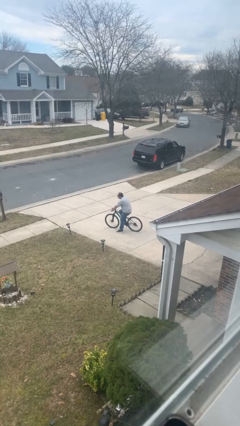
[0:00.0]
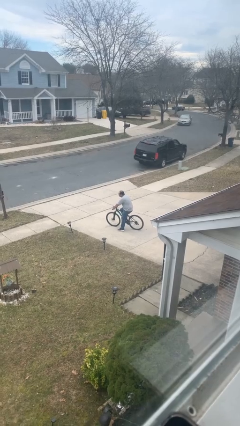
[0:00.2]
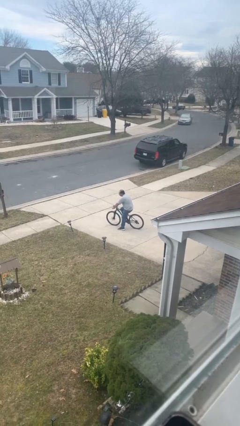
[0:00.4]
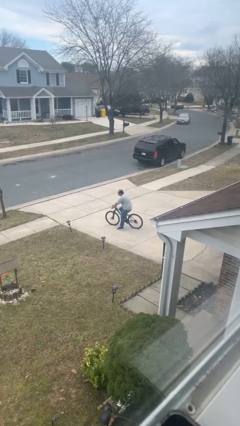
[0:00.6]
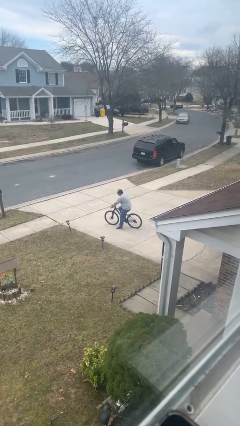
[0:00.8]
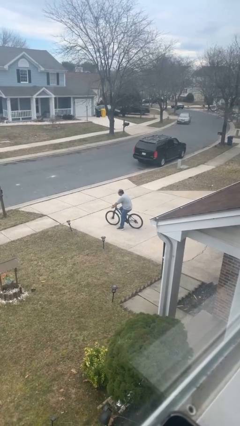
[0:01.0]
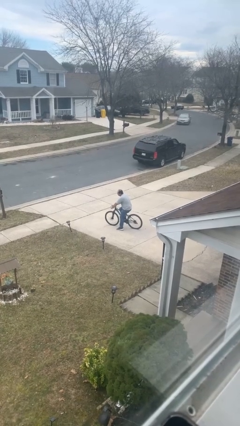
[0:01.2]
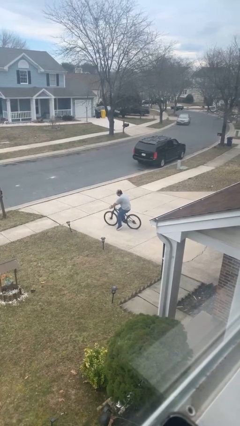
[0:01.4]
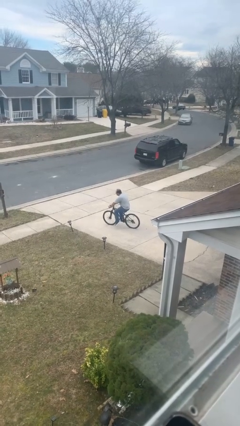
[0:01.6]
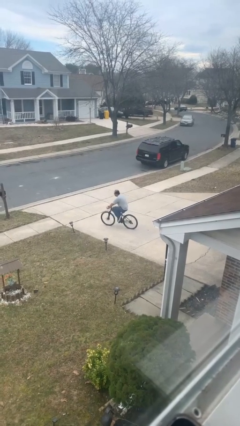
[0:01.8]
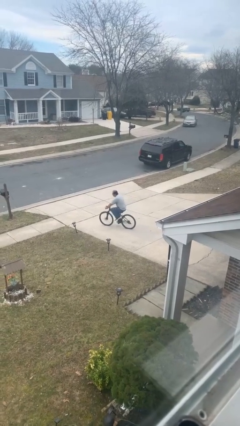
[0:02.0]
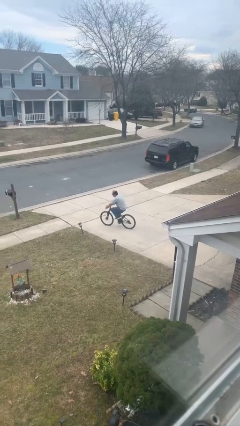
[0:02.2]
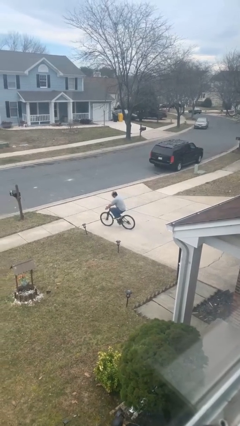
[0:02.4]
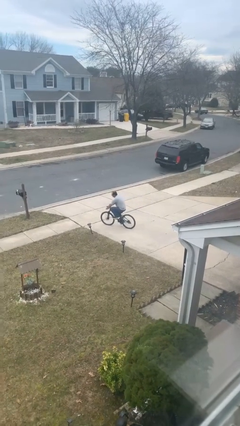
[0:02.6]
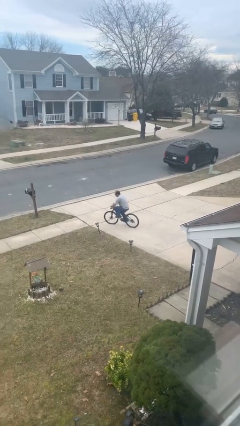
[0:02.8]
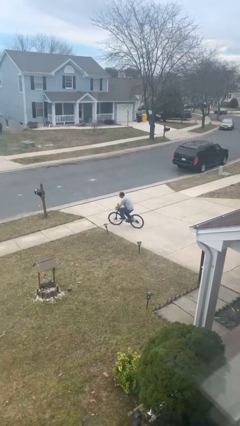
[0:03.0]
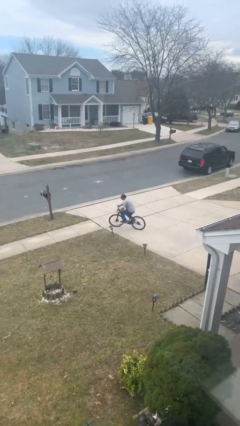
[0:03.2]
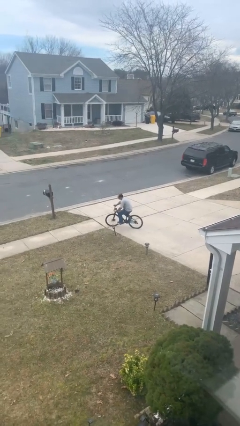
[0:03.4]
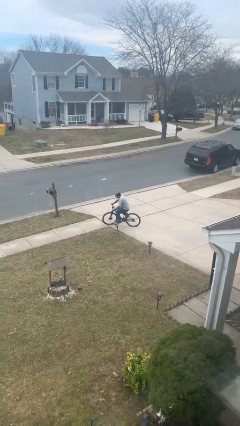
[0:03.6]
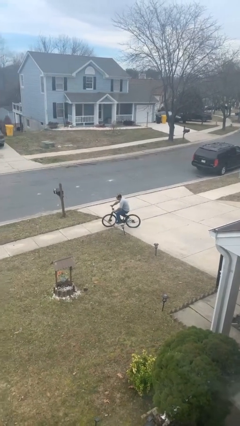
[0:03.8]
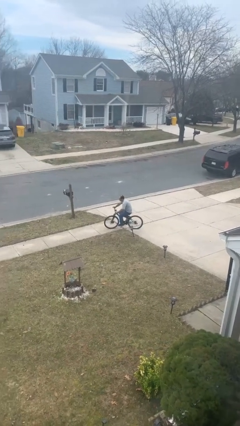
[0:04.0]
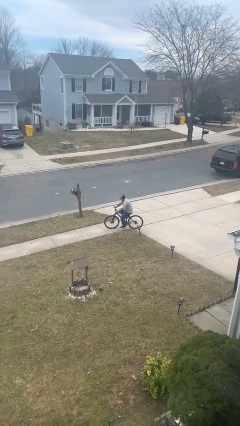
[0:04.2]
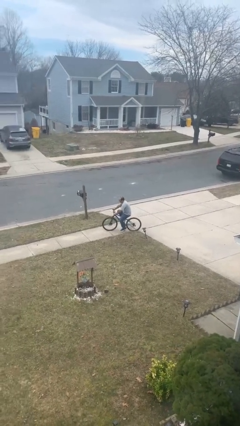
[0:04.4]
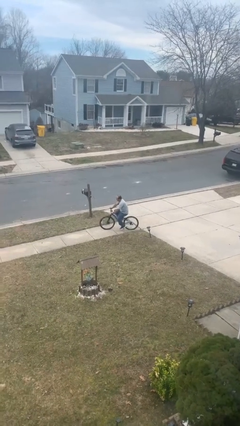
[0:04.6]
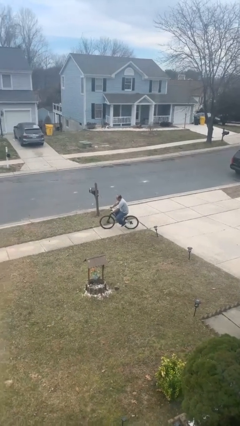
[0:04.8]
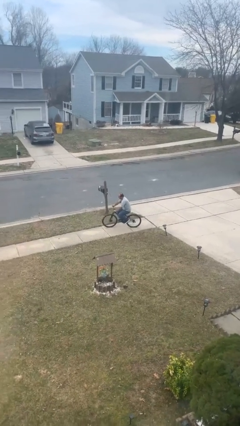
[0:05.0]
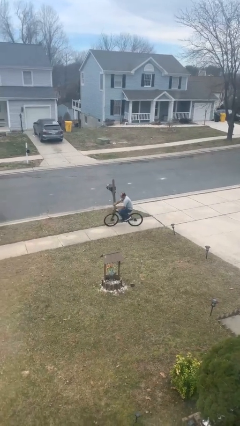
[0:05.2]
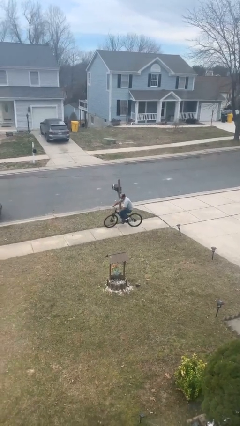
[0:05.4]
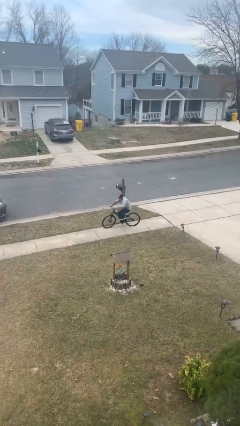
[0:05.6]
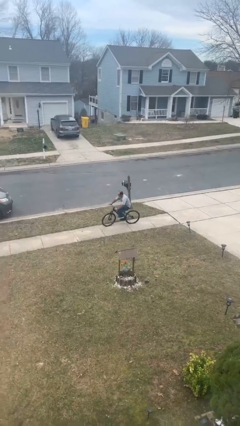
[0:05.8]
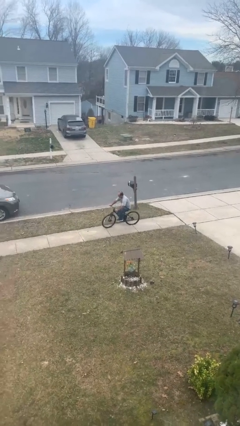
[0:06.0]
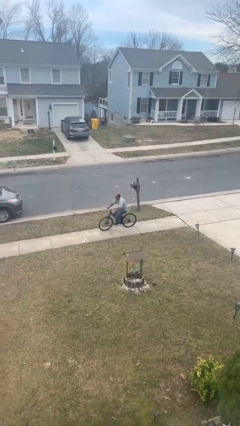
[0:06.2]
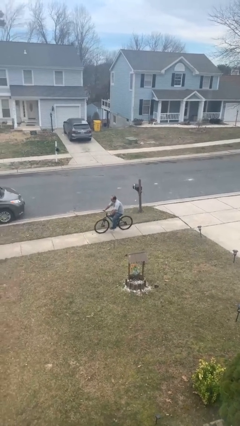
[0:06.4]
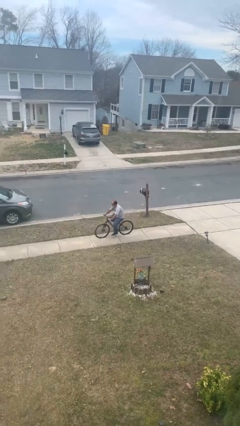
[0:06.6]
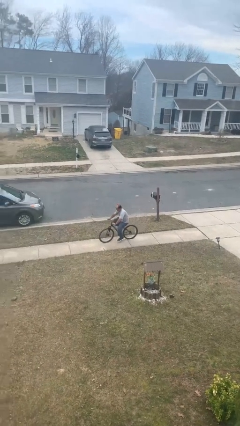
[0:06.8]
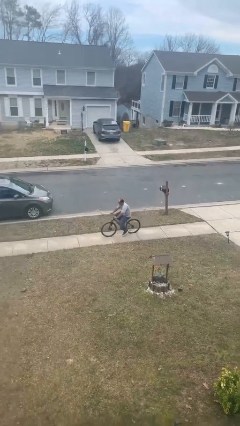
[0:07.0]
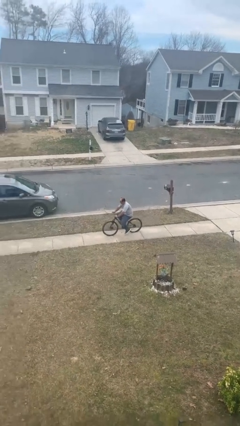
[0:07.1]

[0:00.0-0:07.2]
person rides bicycle

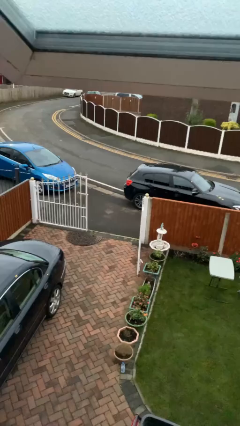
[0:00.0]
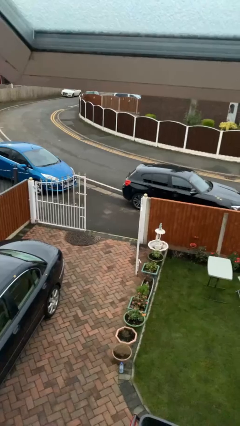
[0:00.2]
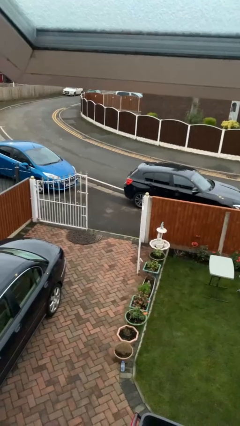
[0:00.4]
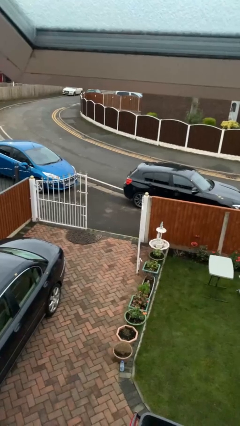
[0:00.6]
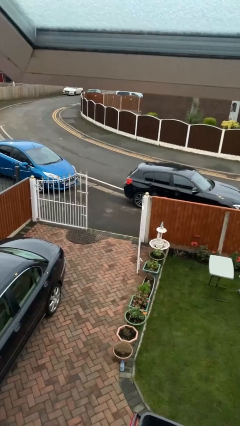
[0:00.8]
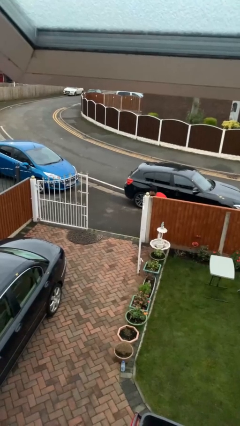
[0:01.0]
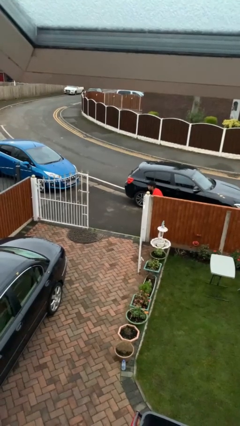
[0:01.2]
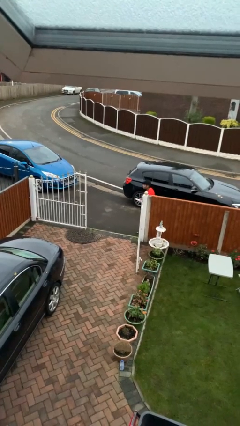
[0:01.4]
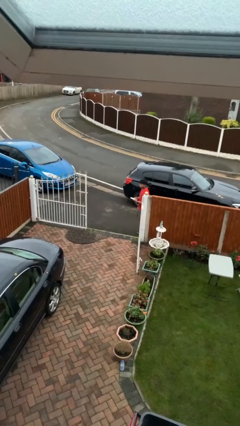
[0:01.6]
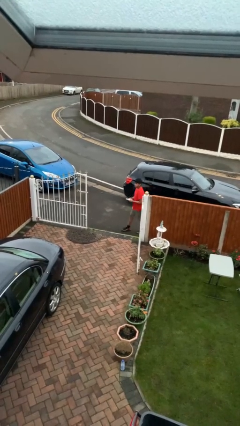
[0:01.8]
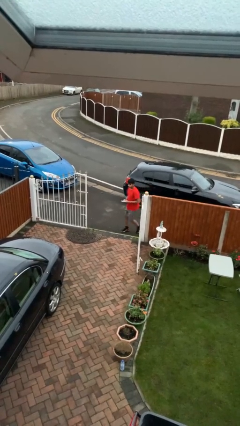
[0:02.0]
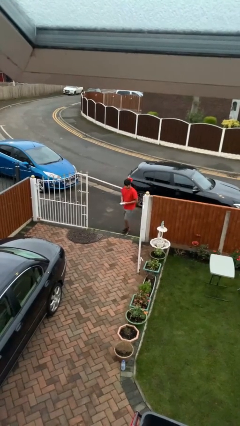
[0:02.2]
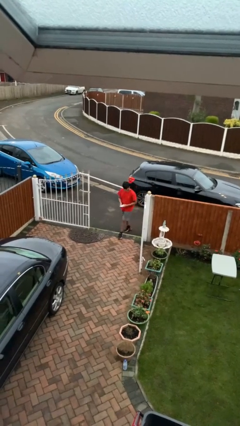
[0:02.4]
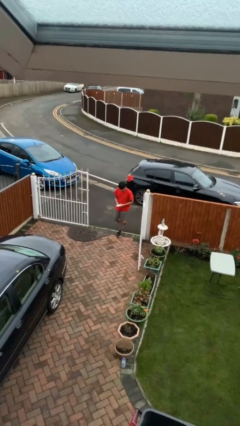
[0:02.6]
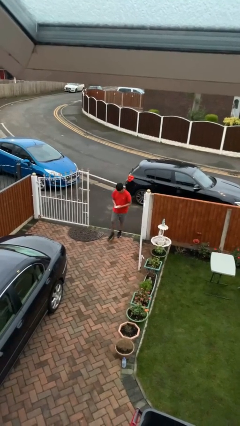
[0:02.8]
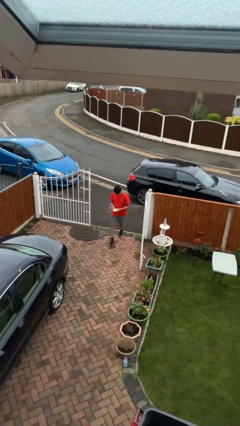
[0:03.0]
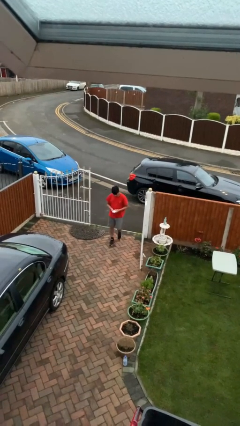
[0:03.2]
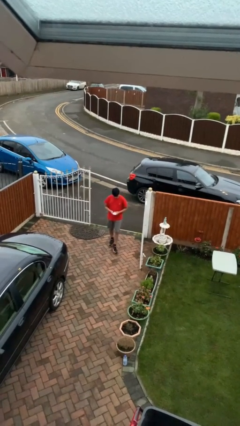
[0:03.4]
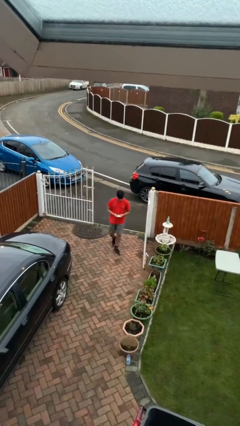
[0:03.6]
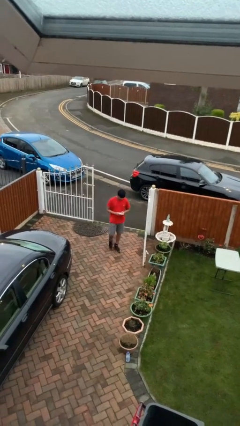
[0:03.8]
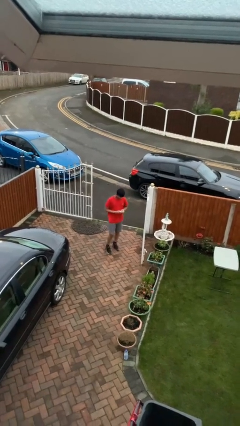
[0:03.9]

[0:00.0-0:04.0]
person enters scene through structure

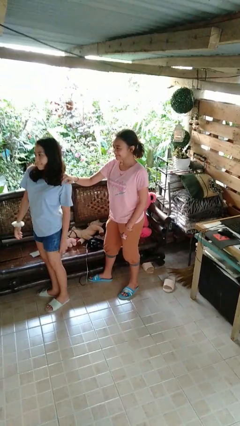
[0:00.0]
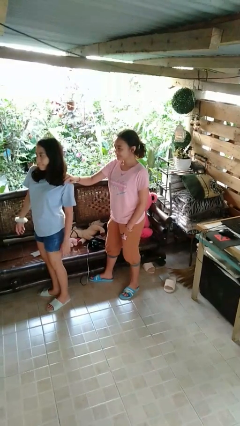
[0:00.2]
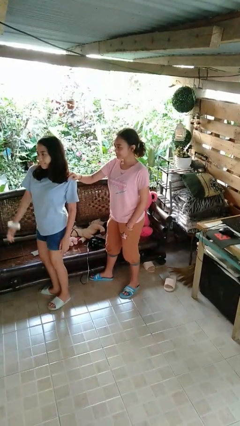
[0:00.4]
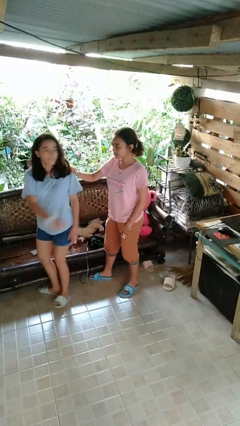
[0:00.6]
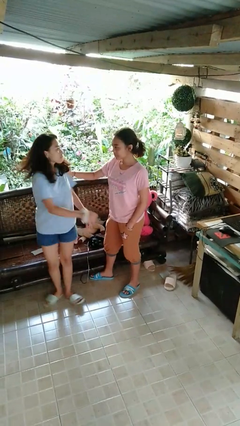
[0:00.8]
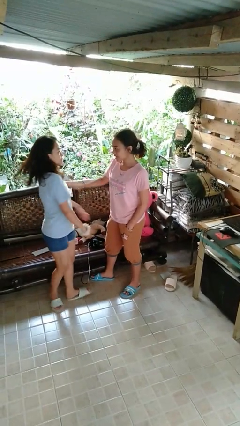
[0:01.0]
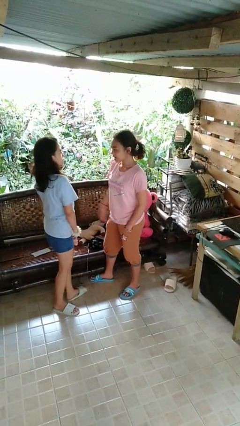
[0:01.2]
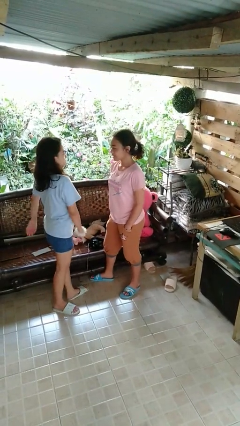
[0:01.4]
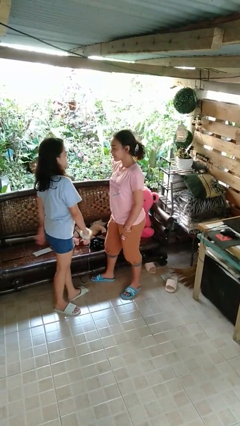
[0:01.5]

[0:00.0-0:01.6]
person spins person around

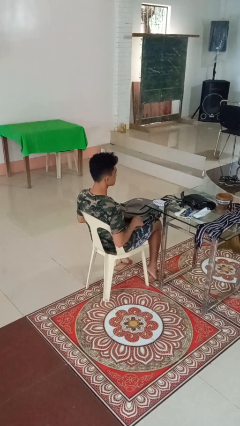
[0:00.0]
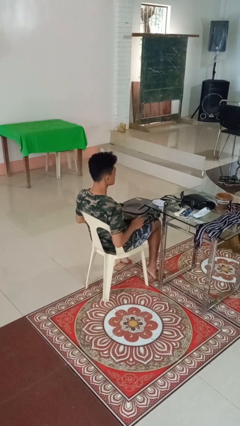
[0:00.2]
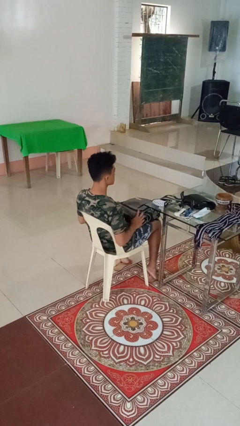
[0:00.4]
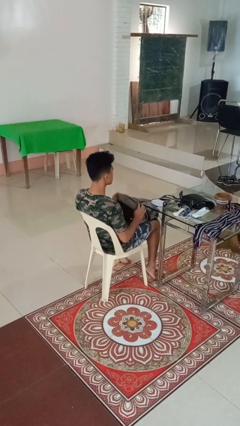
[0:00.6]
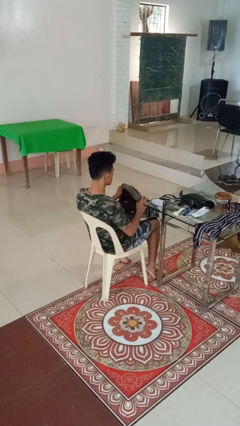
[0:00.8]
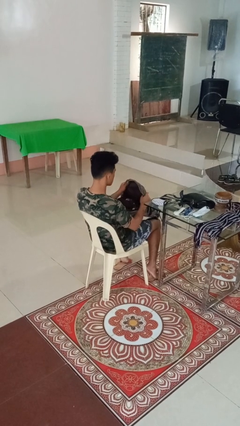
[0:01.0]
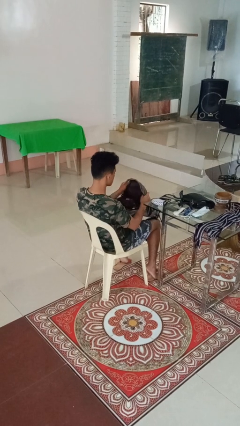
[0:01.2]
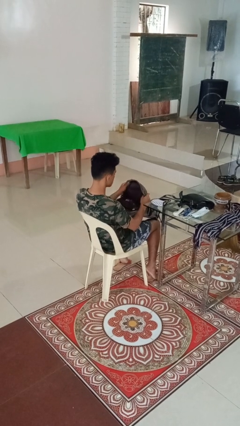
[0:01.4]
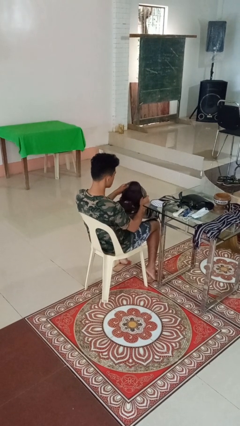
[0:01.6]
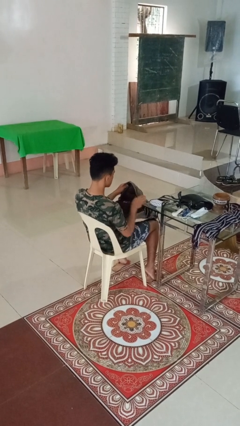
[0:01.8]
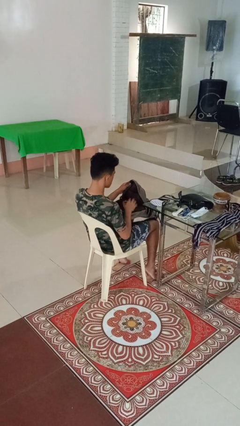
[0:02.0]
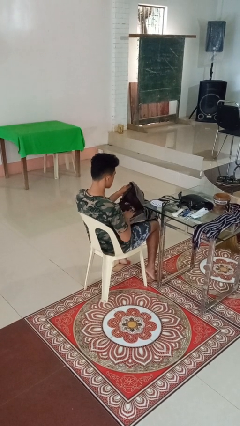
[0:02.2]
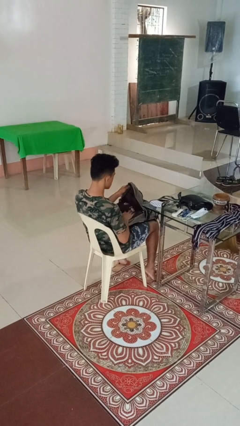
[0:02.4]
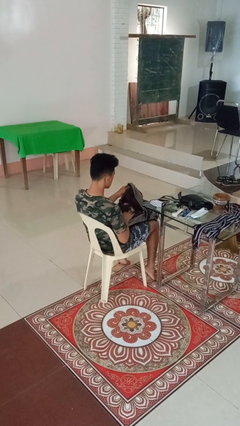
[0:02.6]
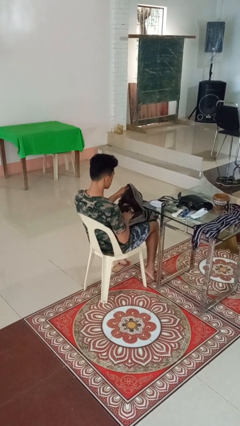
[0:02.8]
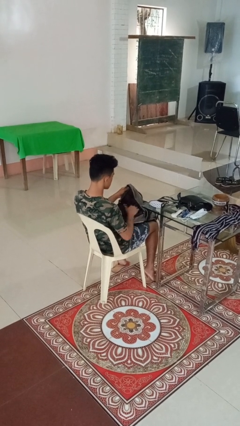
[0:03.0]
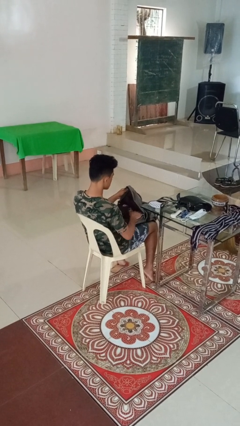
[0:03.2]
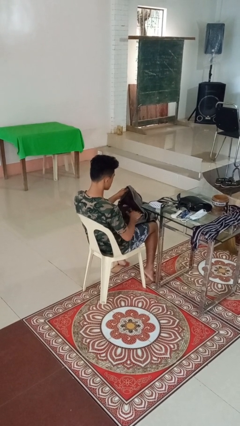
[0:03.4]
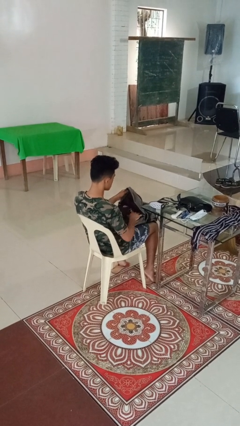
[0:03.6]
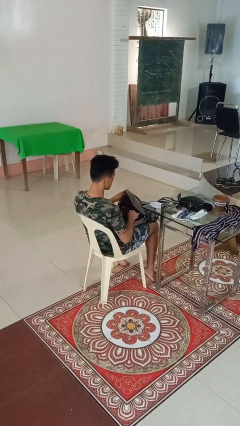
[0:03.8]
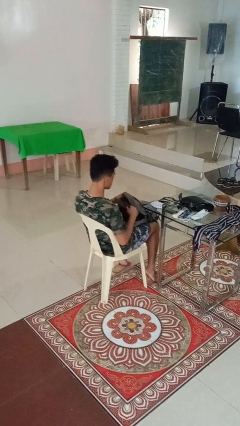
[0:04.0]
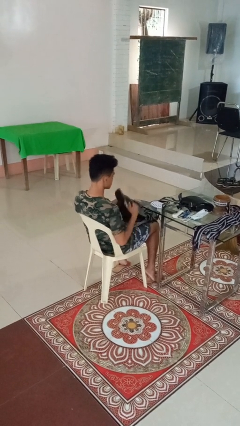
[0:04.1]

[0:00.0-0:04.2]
person searches in backpack

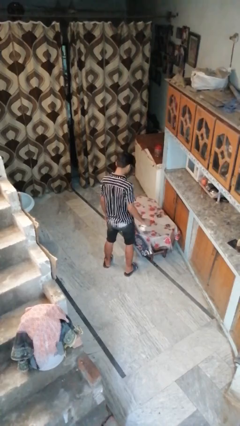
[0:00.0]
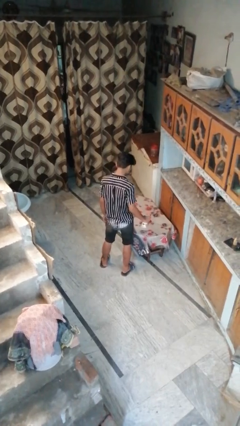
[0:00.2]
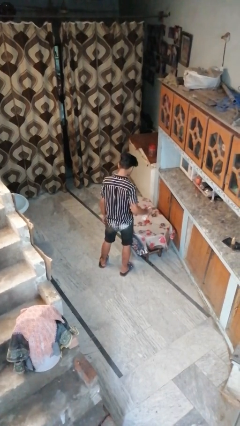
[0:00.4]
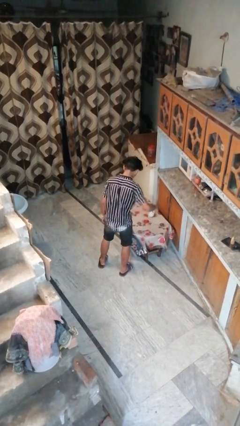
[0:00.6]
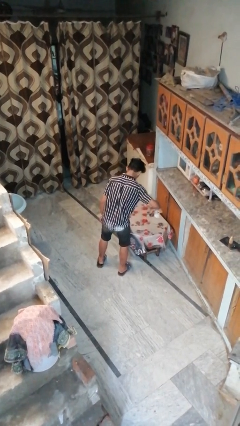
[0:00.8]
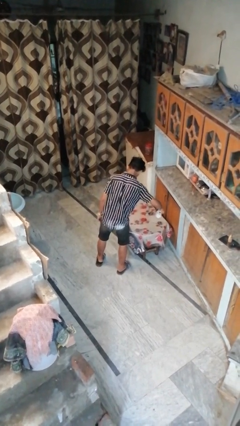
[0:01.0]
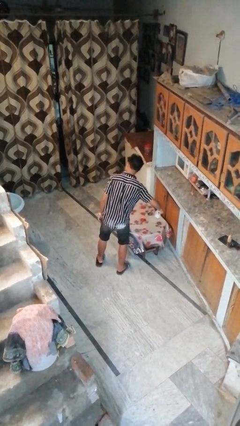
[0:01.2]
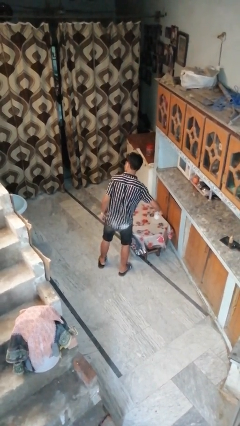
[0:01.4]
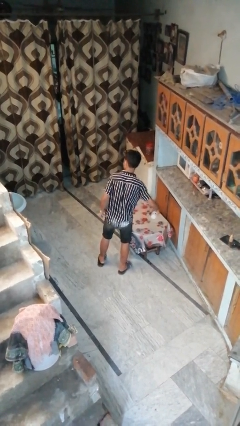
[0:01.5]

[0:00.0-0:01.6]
person sprays from bottle
